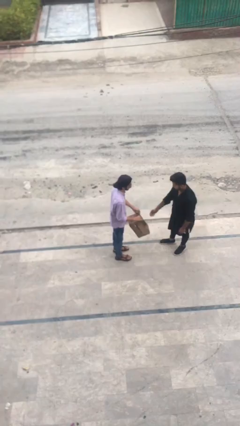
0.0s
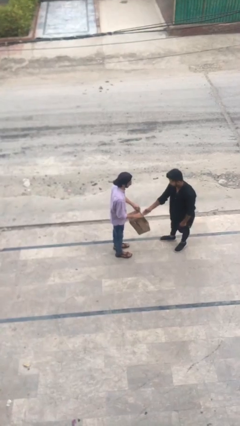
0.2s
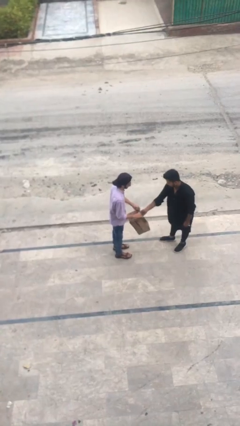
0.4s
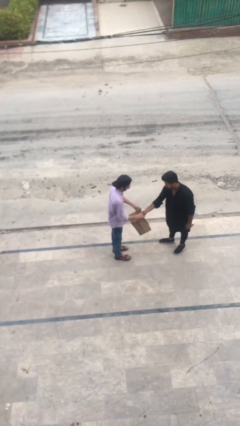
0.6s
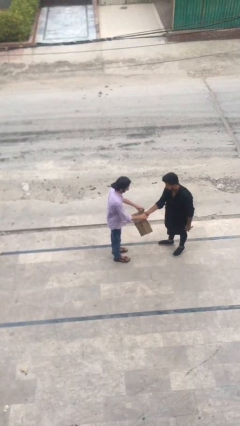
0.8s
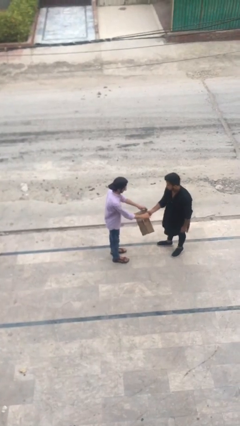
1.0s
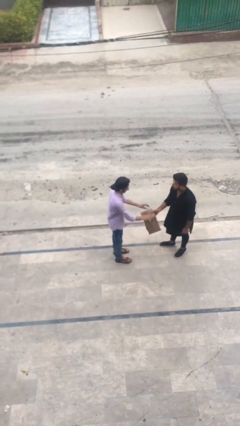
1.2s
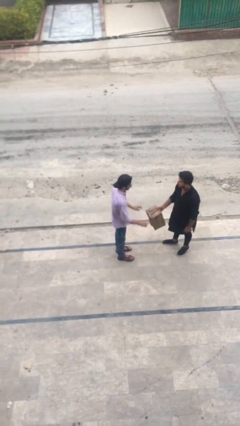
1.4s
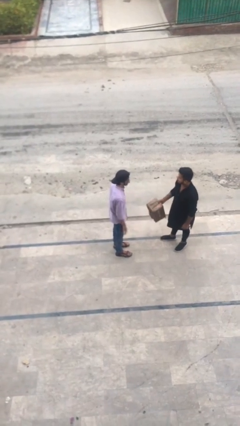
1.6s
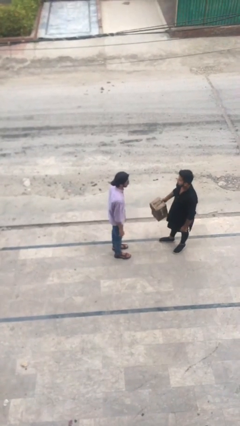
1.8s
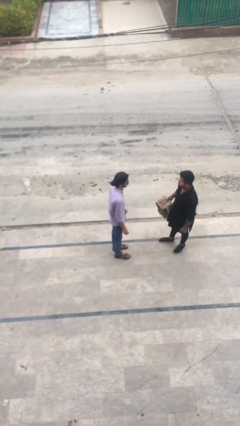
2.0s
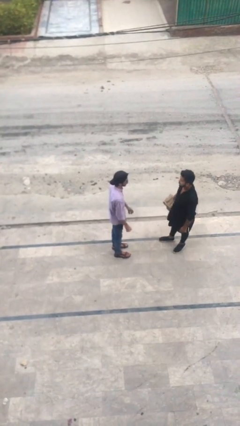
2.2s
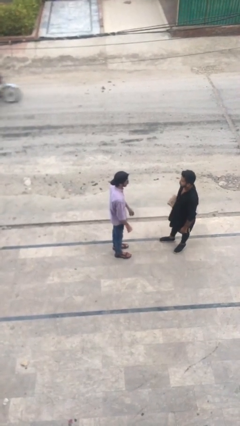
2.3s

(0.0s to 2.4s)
person transfers object to person

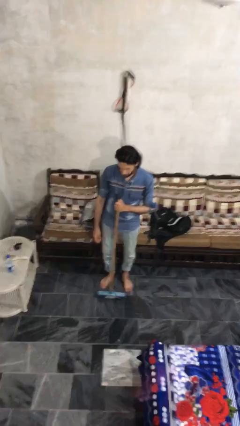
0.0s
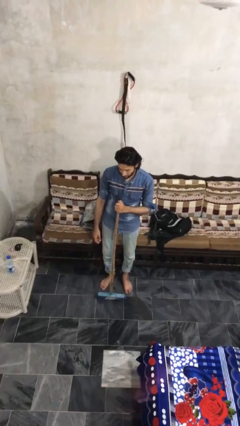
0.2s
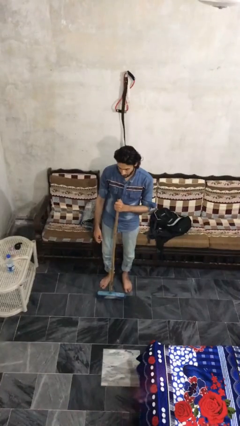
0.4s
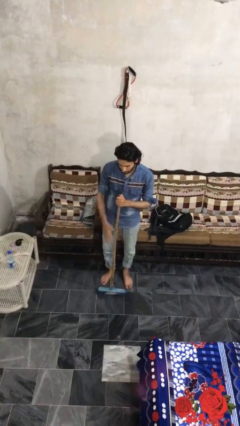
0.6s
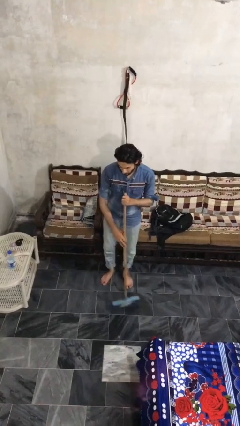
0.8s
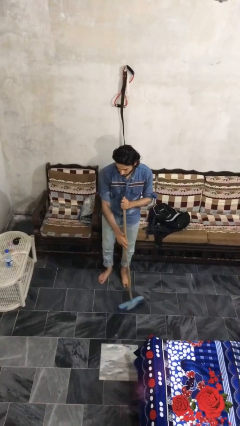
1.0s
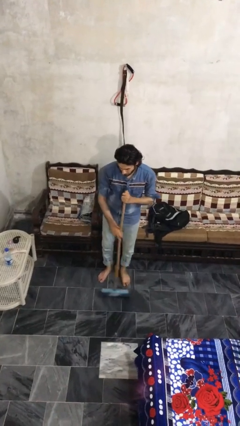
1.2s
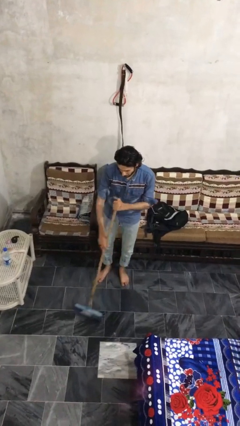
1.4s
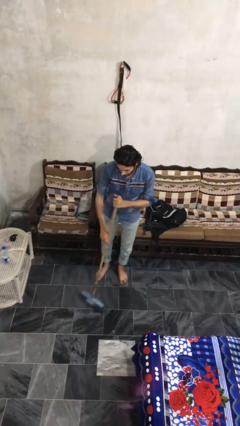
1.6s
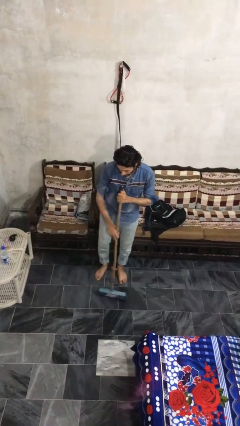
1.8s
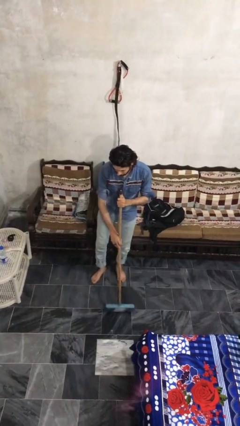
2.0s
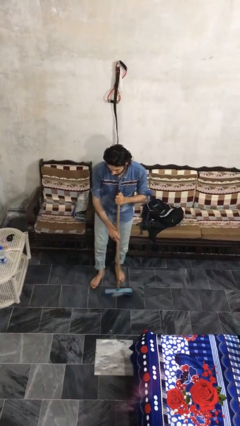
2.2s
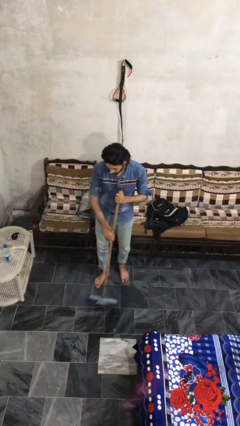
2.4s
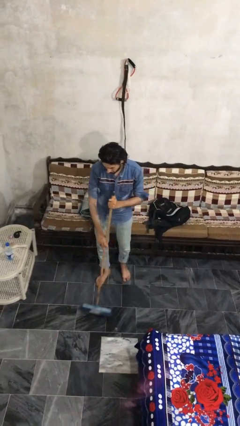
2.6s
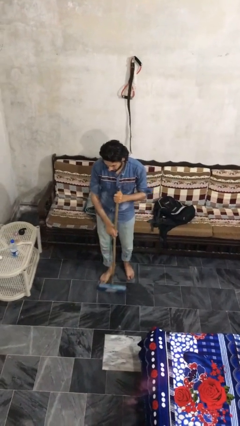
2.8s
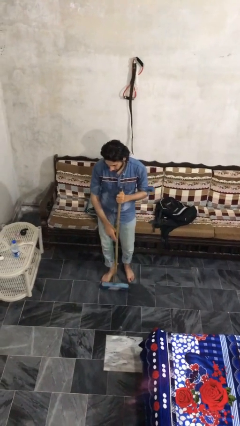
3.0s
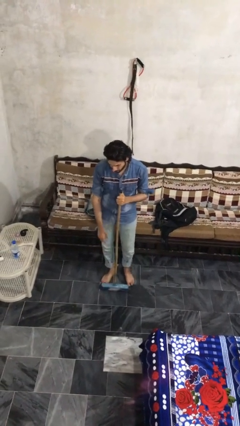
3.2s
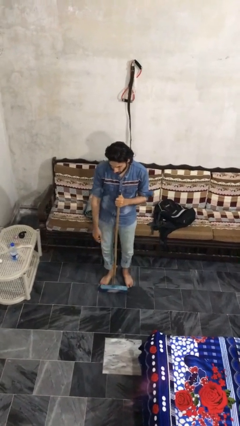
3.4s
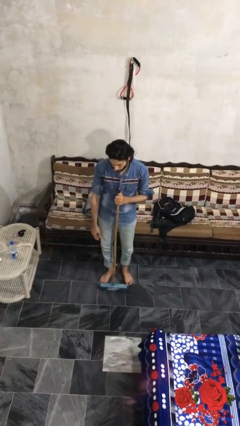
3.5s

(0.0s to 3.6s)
person sweeps floor

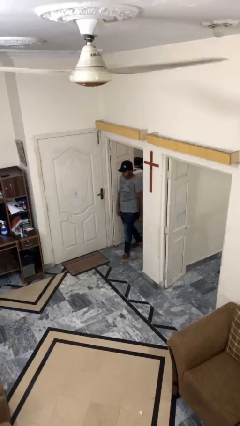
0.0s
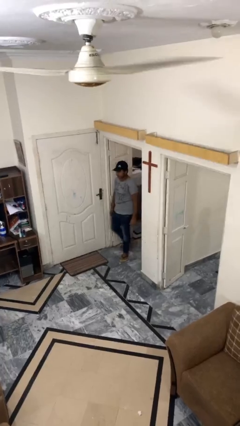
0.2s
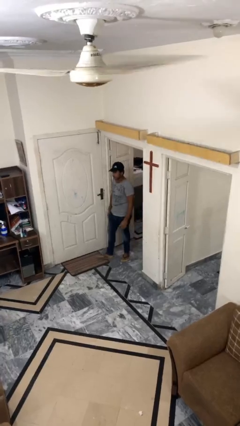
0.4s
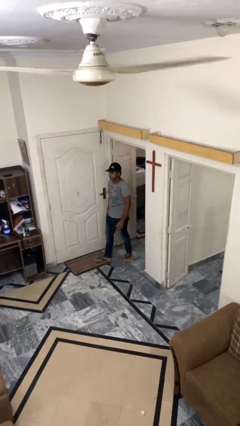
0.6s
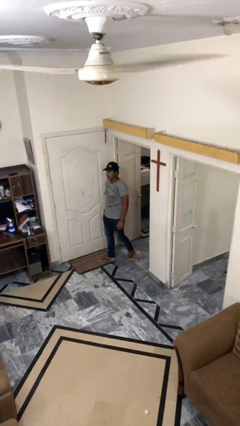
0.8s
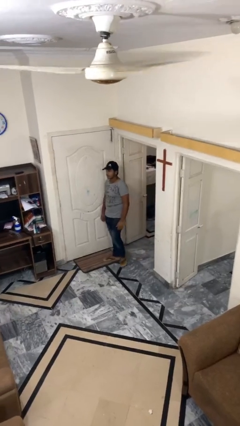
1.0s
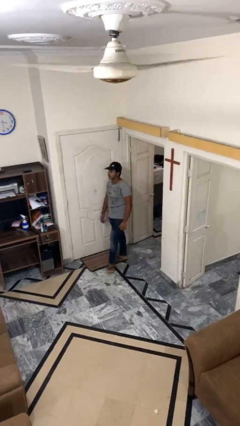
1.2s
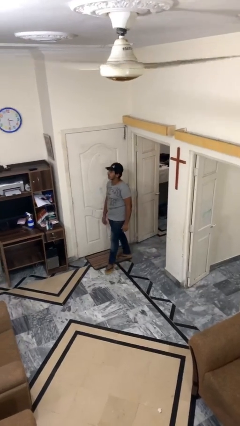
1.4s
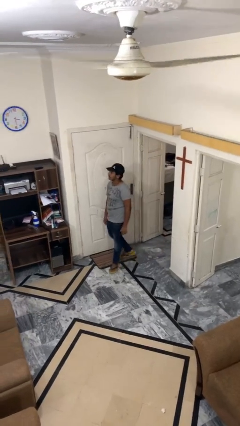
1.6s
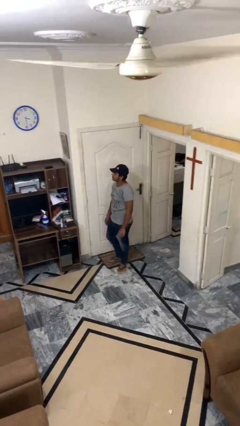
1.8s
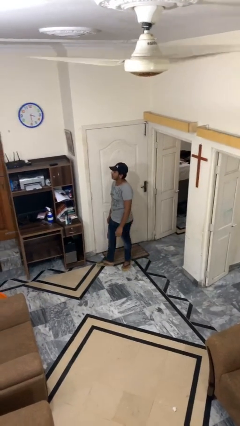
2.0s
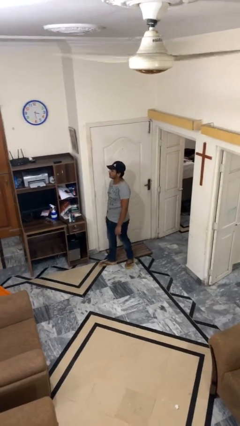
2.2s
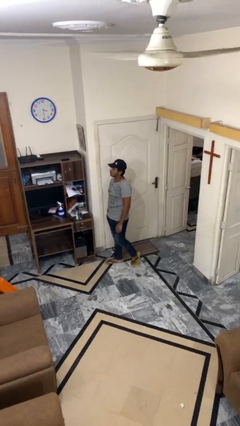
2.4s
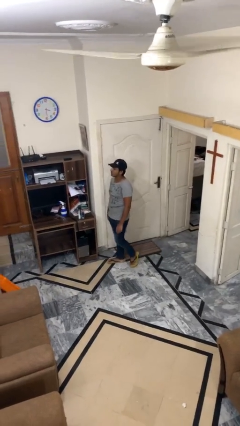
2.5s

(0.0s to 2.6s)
person enters scene through structure

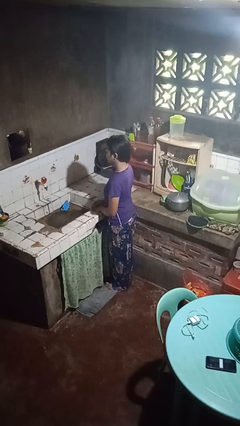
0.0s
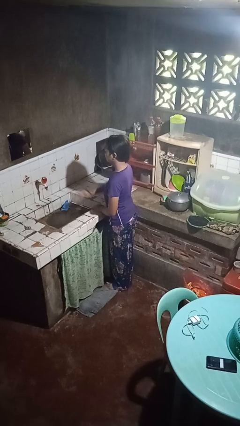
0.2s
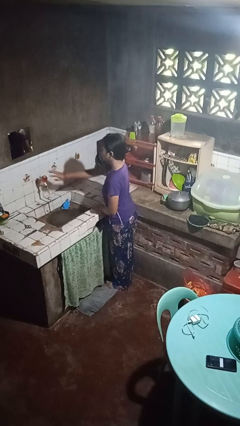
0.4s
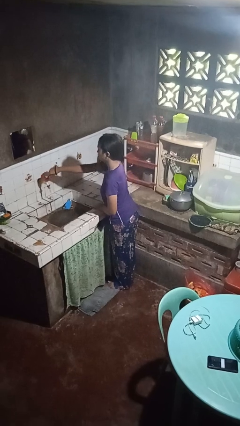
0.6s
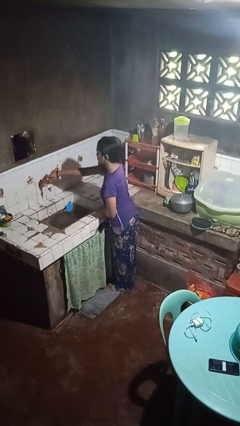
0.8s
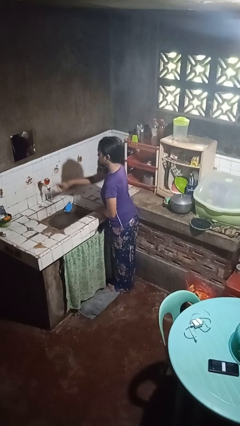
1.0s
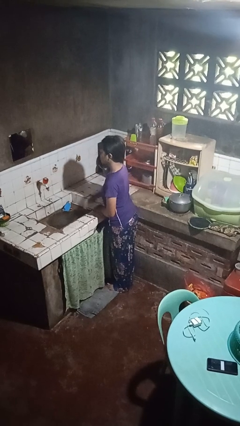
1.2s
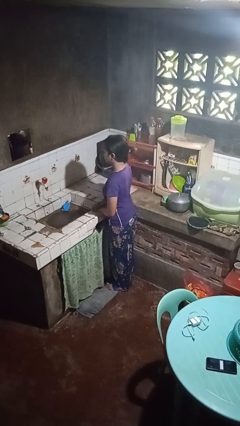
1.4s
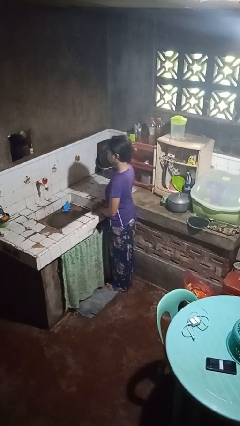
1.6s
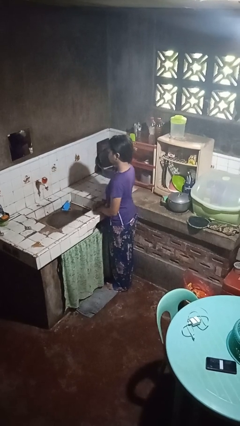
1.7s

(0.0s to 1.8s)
person turns off faucet

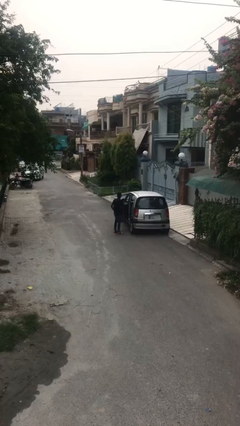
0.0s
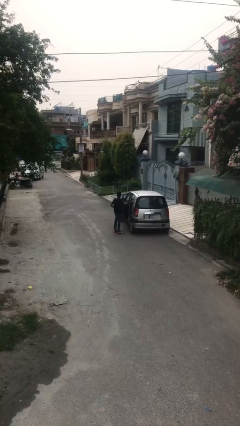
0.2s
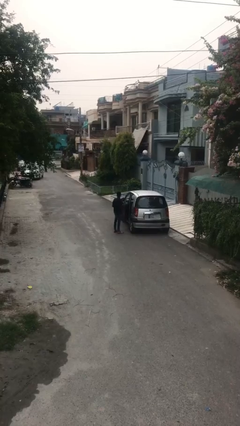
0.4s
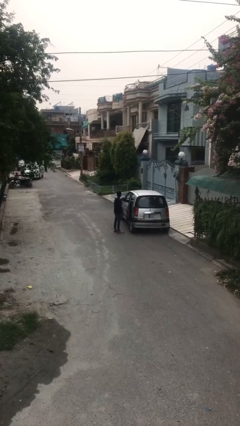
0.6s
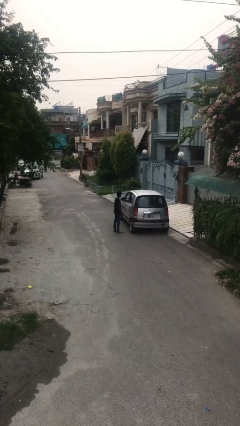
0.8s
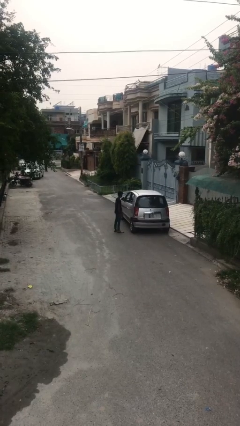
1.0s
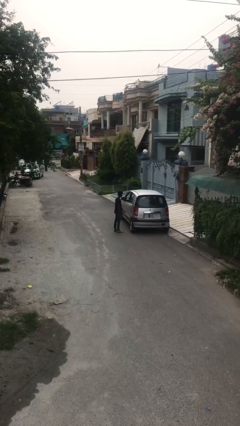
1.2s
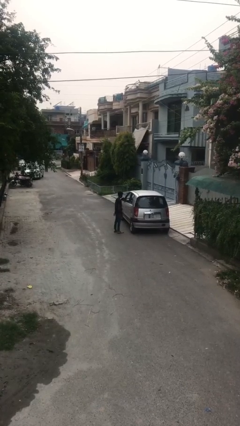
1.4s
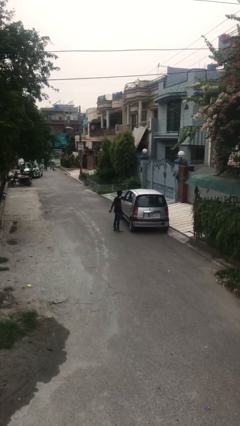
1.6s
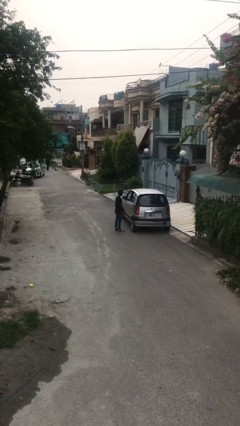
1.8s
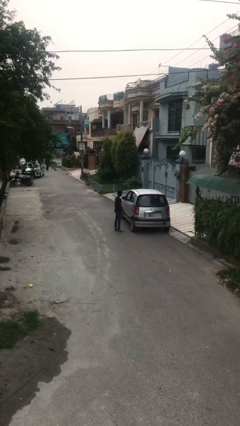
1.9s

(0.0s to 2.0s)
person closes car door

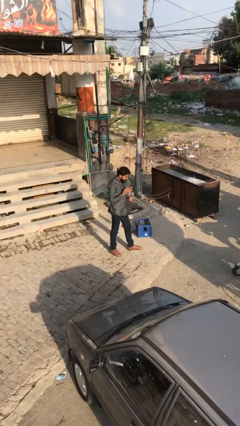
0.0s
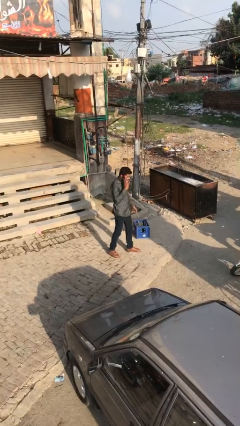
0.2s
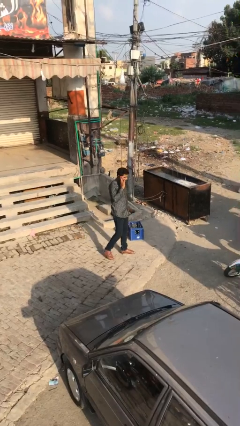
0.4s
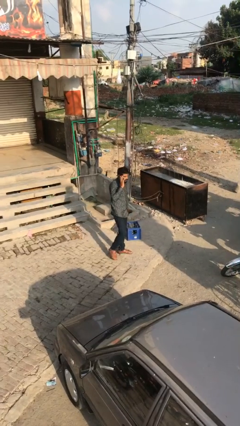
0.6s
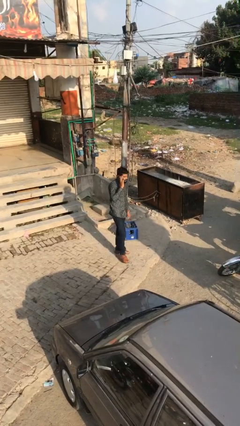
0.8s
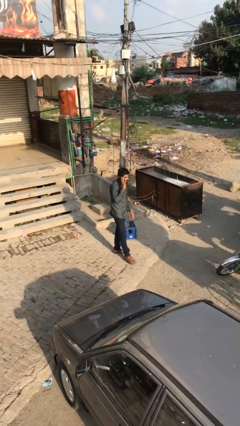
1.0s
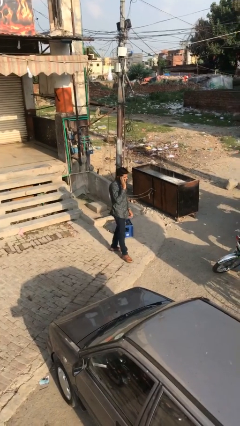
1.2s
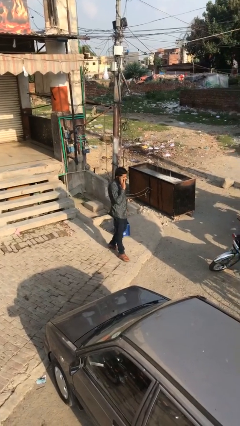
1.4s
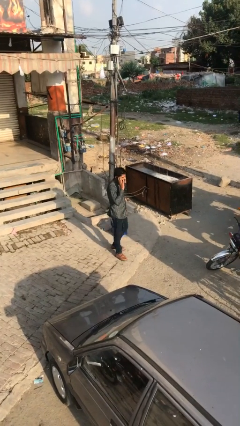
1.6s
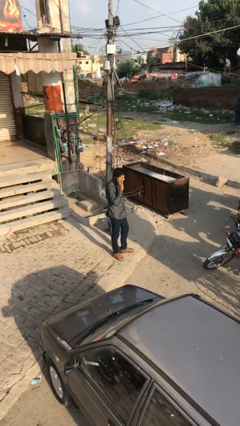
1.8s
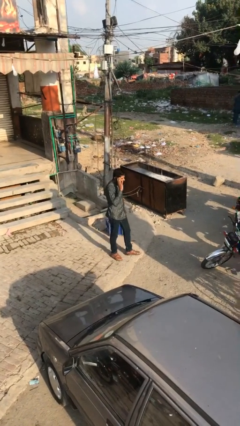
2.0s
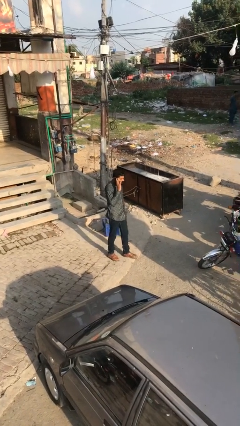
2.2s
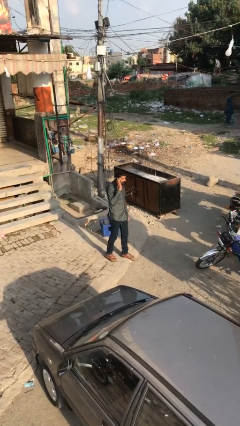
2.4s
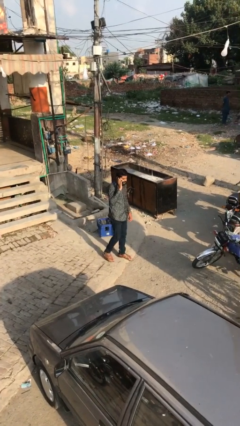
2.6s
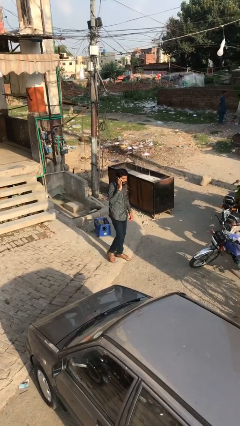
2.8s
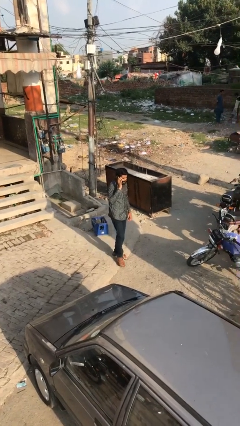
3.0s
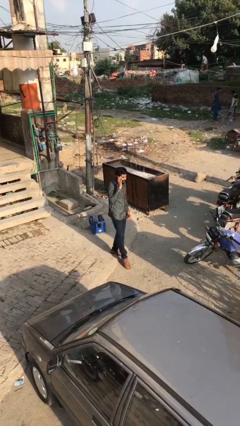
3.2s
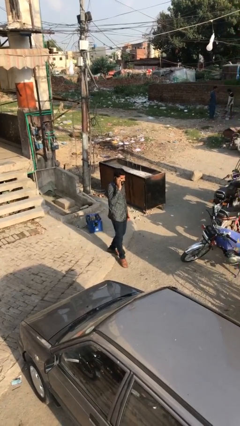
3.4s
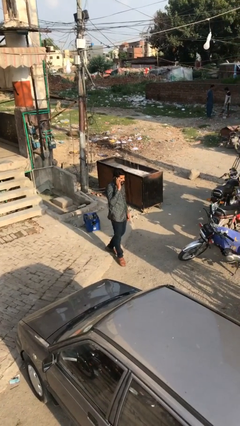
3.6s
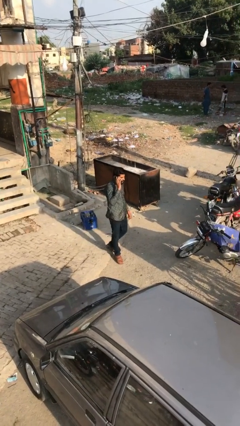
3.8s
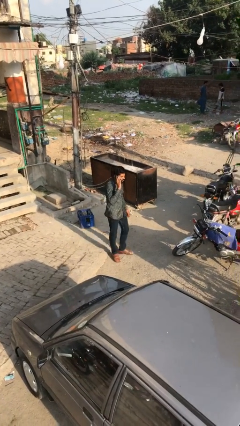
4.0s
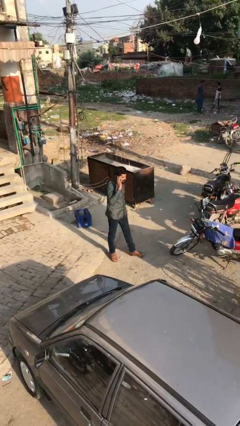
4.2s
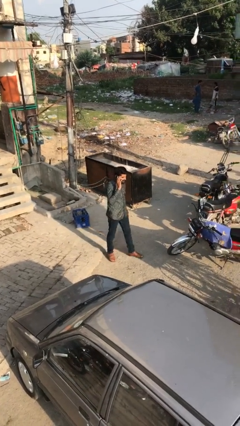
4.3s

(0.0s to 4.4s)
person talks on phone

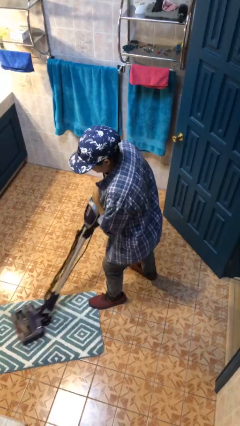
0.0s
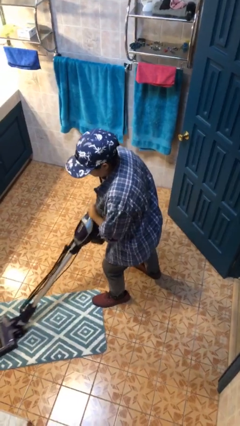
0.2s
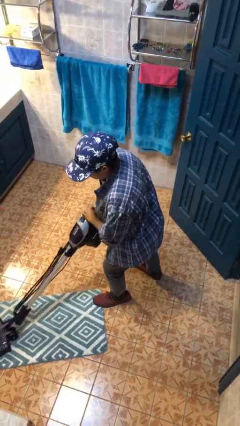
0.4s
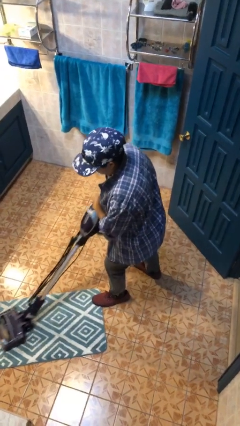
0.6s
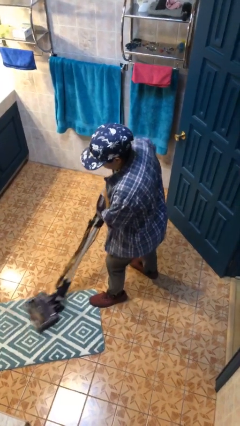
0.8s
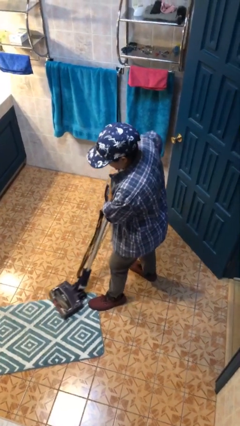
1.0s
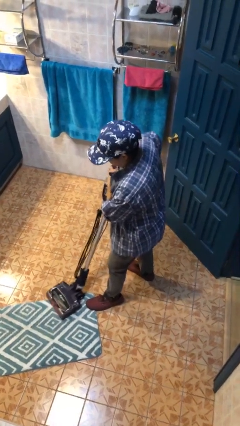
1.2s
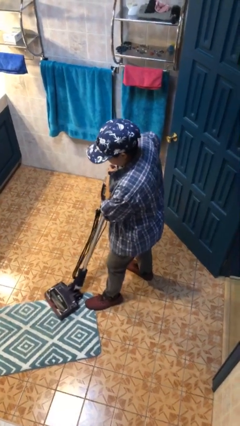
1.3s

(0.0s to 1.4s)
person vacuums carpet
